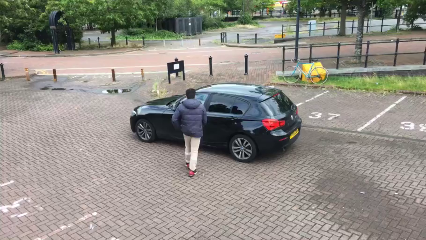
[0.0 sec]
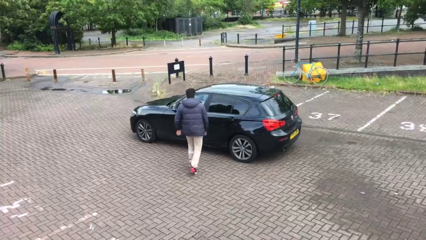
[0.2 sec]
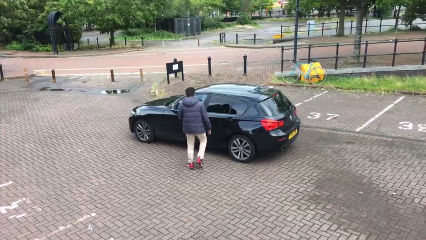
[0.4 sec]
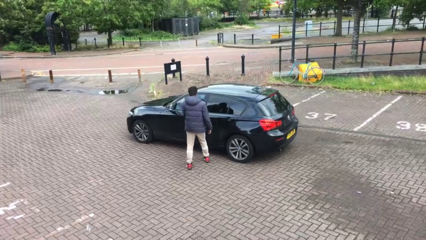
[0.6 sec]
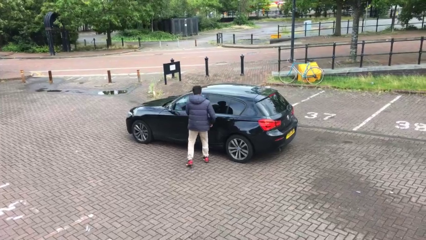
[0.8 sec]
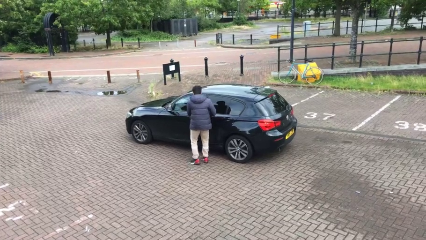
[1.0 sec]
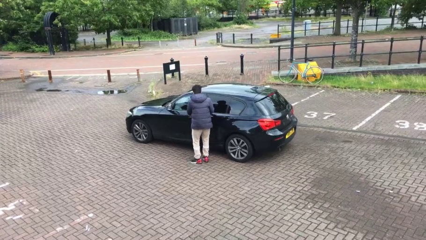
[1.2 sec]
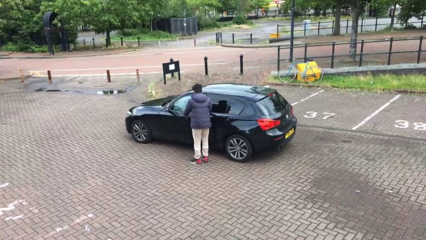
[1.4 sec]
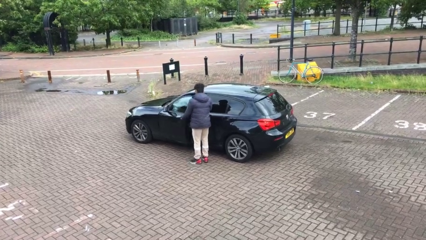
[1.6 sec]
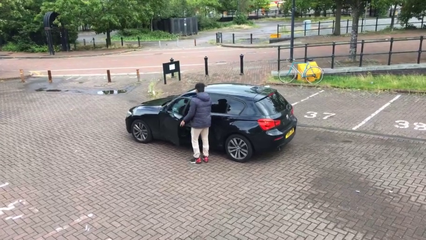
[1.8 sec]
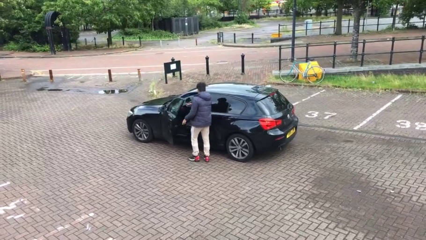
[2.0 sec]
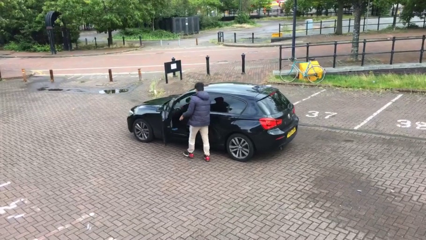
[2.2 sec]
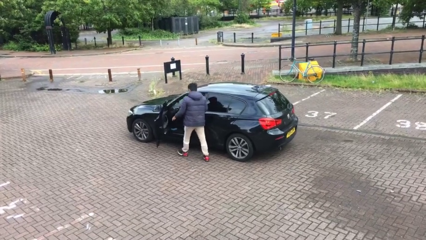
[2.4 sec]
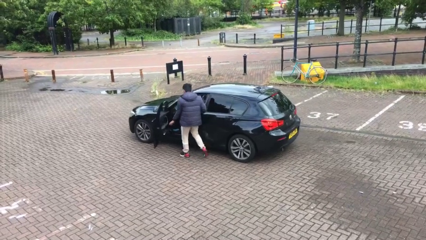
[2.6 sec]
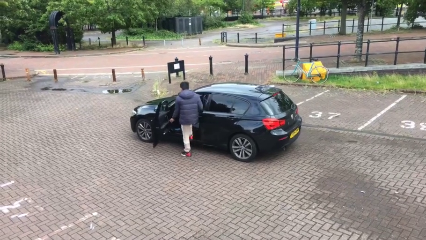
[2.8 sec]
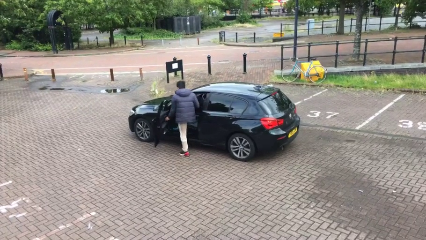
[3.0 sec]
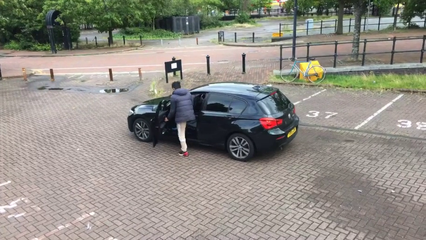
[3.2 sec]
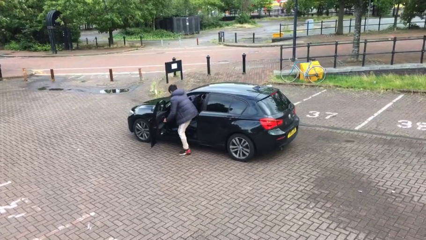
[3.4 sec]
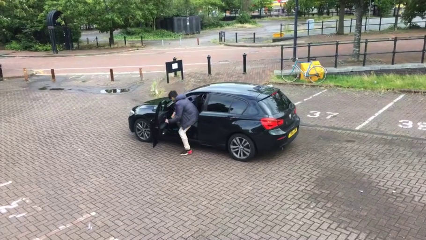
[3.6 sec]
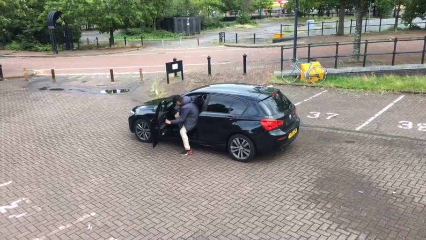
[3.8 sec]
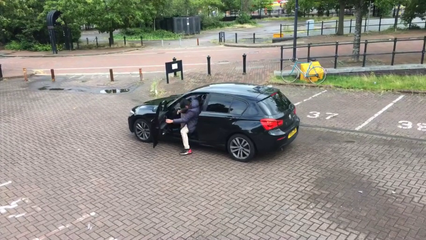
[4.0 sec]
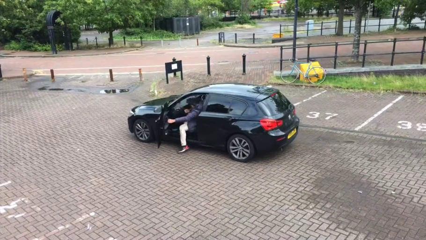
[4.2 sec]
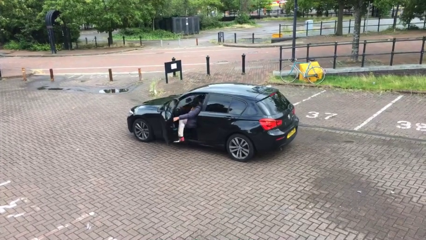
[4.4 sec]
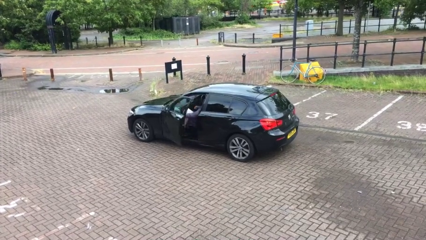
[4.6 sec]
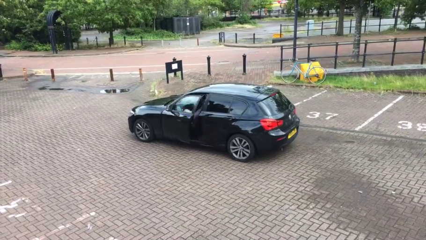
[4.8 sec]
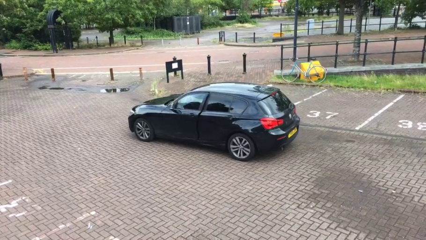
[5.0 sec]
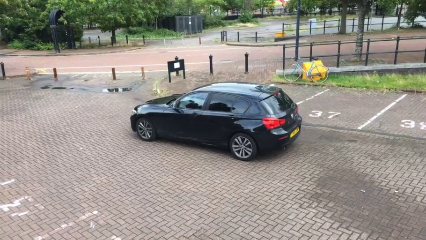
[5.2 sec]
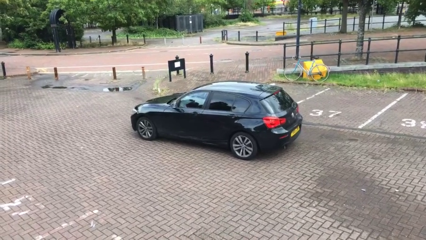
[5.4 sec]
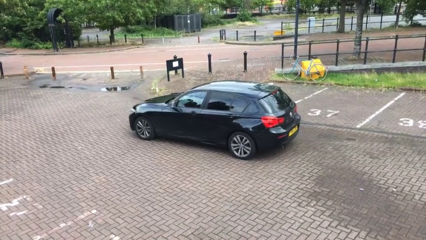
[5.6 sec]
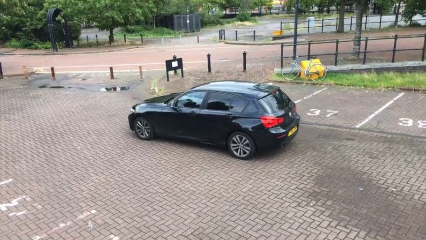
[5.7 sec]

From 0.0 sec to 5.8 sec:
car picks up person

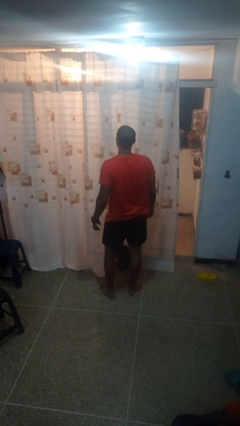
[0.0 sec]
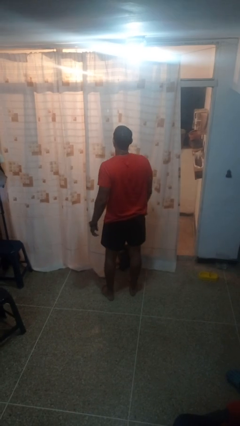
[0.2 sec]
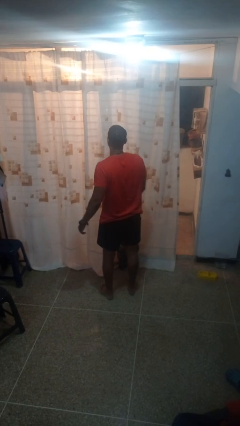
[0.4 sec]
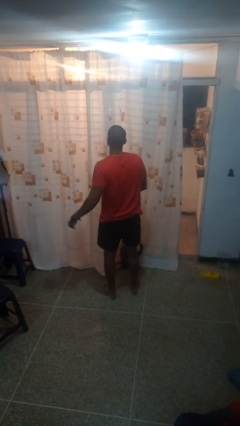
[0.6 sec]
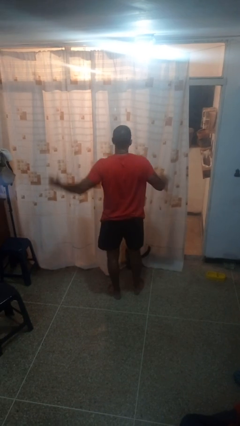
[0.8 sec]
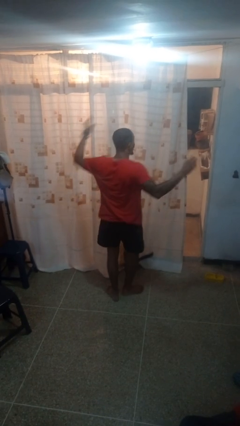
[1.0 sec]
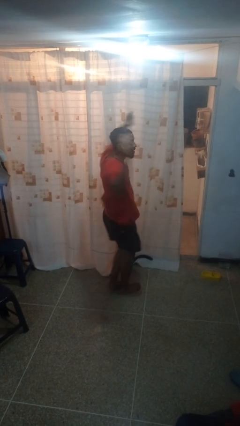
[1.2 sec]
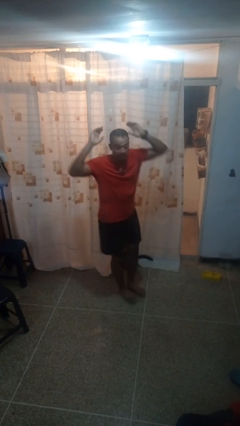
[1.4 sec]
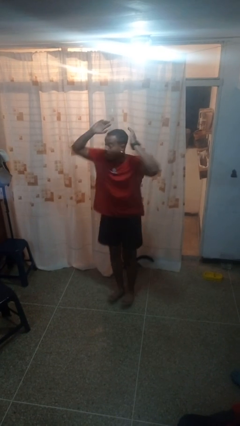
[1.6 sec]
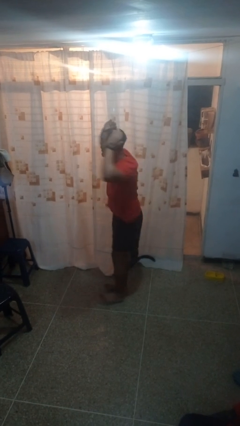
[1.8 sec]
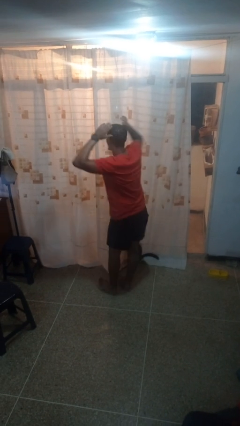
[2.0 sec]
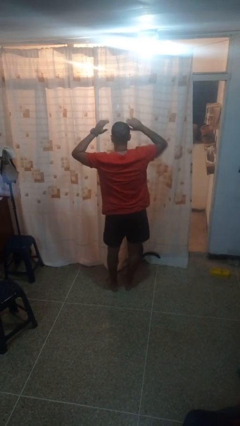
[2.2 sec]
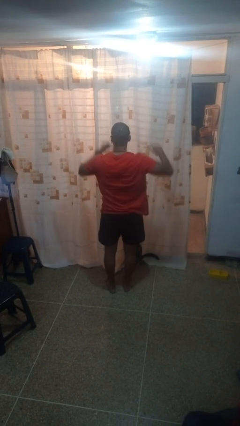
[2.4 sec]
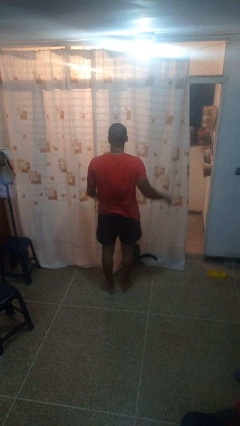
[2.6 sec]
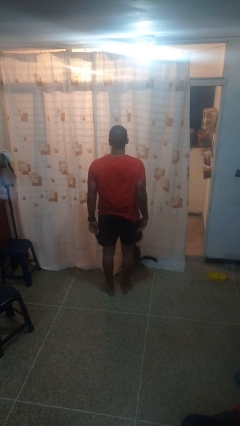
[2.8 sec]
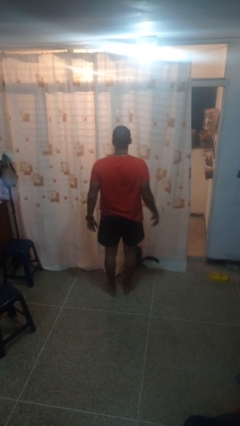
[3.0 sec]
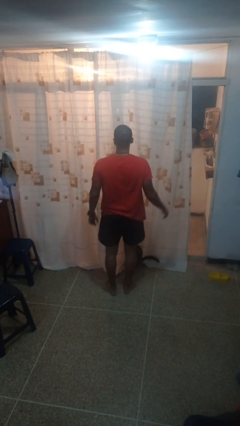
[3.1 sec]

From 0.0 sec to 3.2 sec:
person twirls

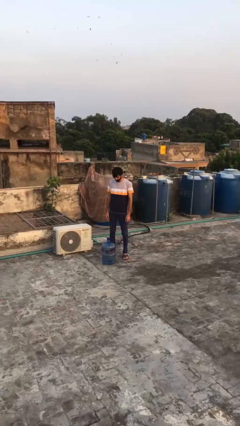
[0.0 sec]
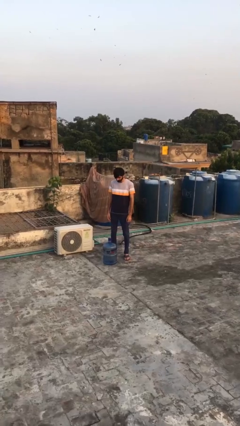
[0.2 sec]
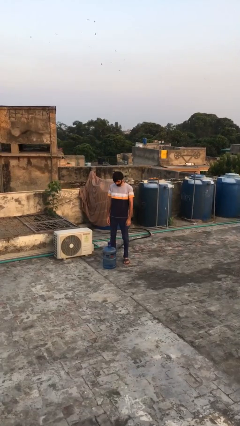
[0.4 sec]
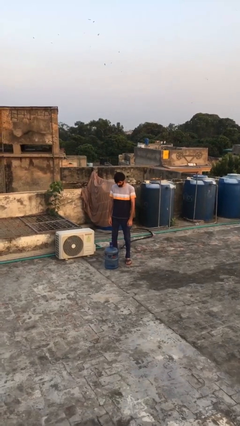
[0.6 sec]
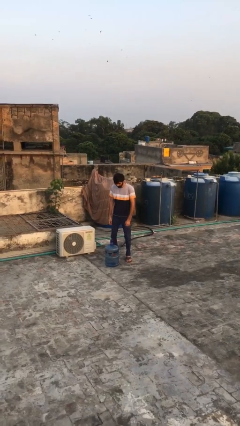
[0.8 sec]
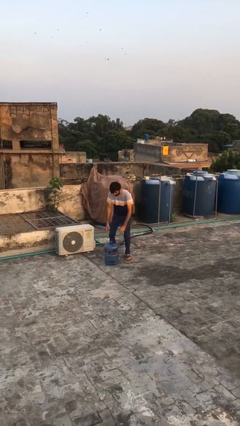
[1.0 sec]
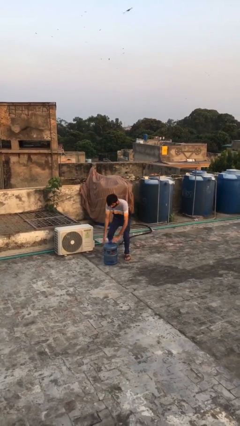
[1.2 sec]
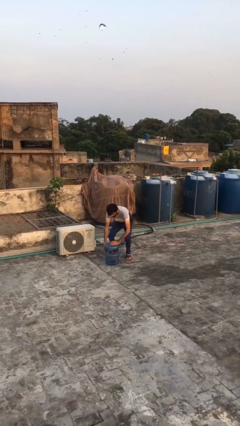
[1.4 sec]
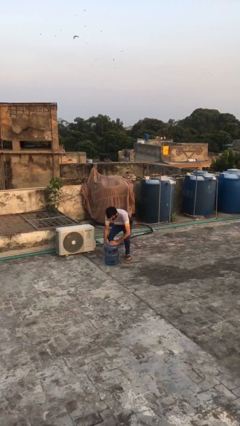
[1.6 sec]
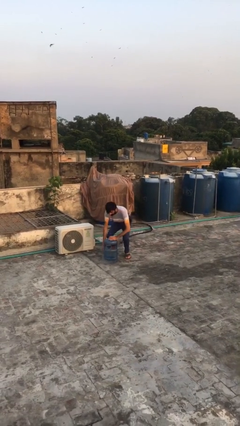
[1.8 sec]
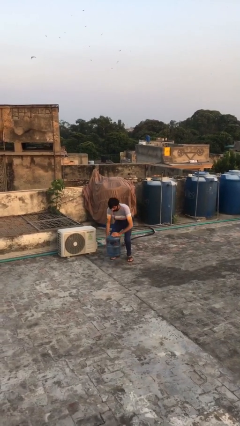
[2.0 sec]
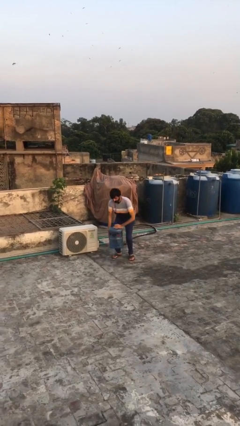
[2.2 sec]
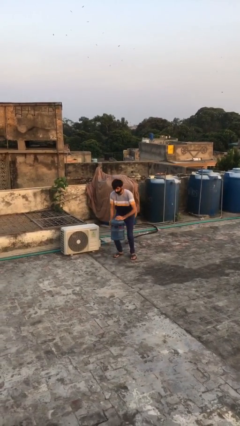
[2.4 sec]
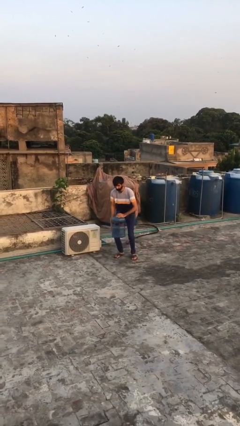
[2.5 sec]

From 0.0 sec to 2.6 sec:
person picks up object from floor

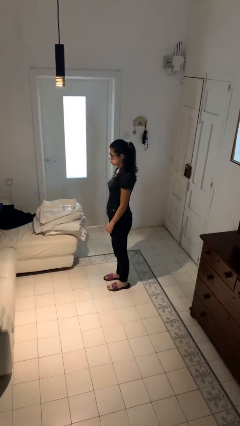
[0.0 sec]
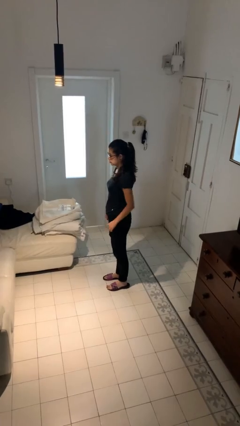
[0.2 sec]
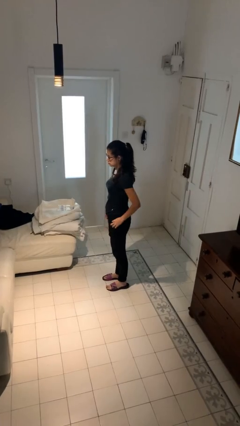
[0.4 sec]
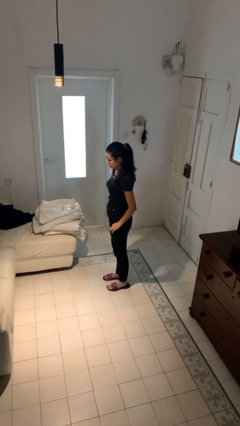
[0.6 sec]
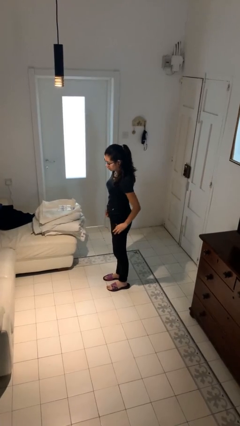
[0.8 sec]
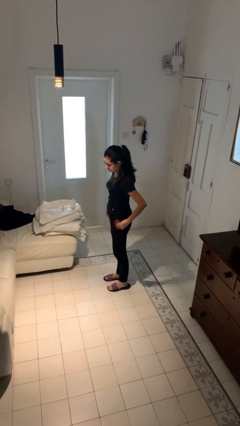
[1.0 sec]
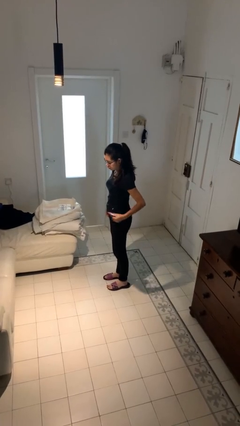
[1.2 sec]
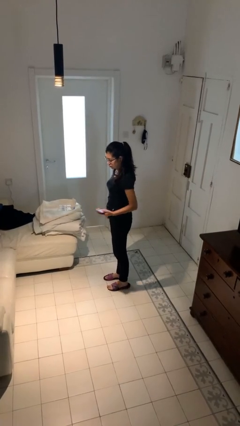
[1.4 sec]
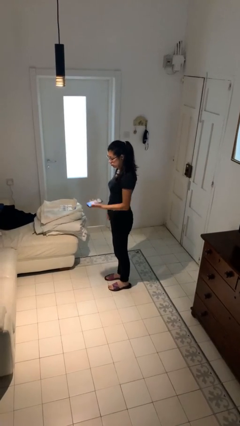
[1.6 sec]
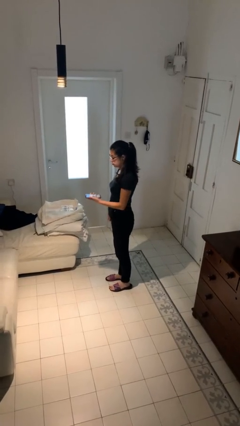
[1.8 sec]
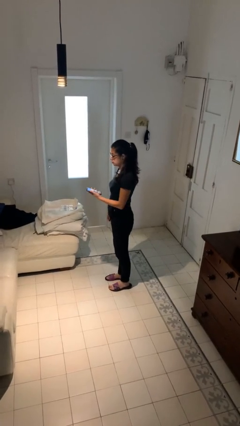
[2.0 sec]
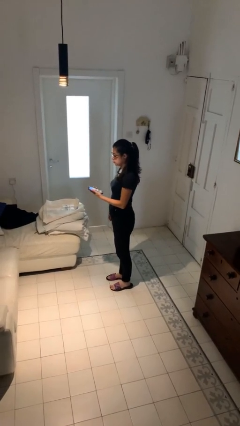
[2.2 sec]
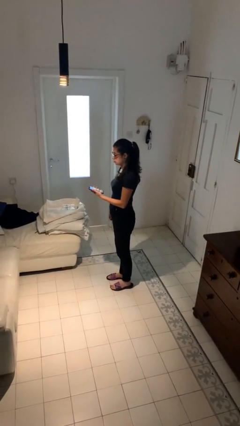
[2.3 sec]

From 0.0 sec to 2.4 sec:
person takes phone from pocket

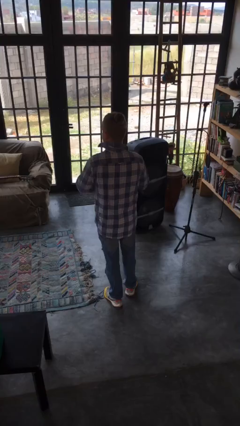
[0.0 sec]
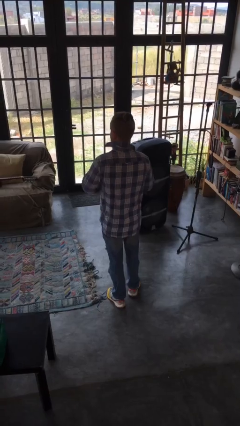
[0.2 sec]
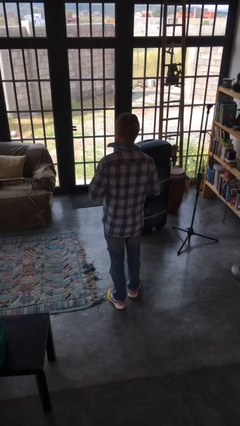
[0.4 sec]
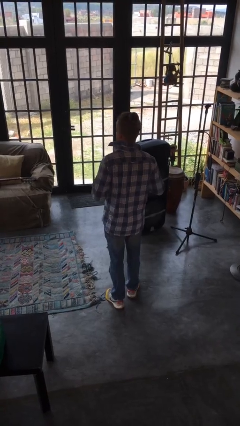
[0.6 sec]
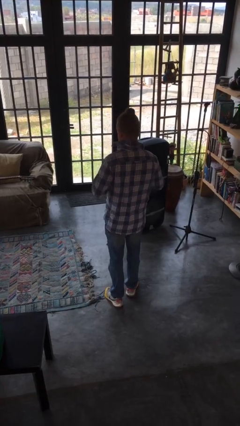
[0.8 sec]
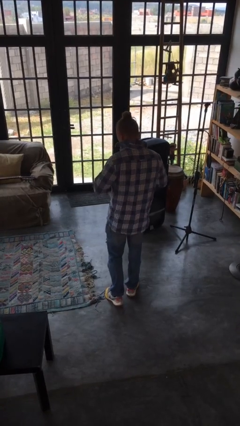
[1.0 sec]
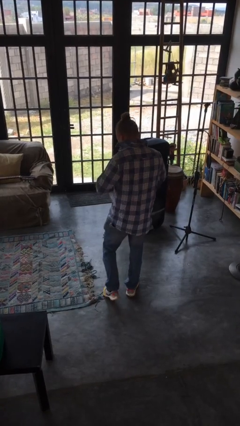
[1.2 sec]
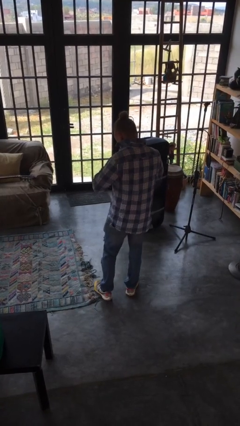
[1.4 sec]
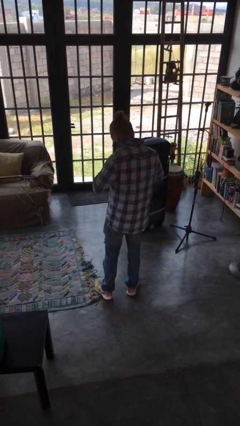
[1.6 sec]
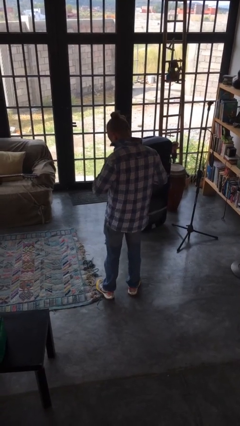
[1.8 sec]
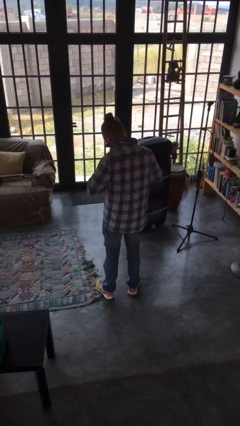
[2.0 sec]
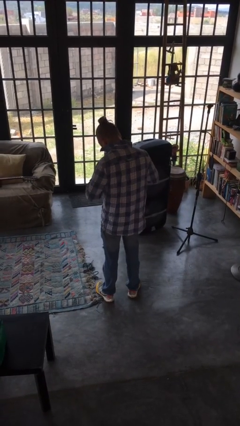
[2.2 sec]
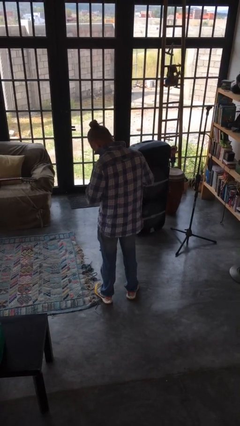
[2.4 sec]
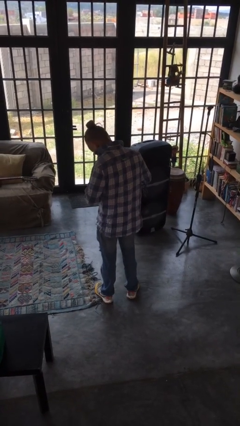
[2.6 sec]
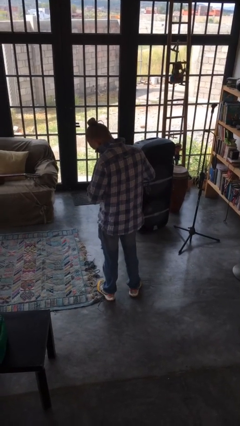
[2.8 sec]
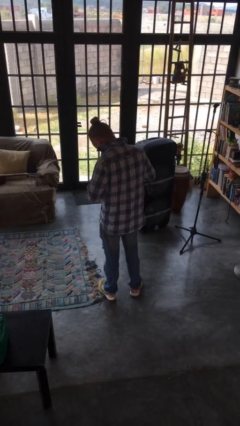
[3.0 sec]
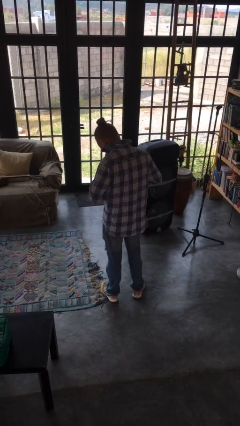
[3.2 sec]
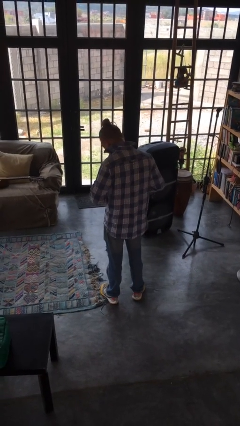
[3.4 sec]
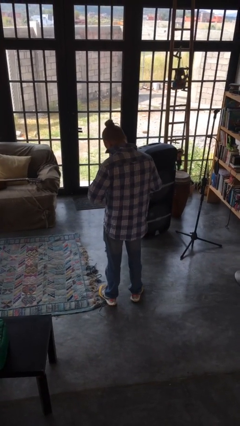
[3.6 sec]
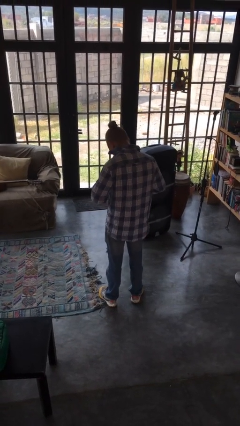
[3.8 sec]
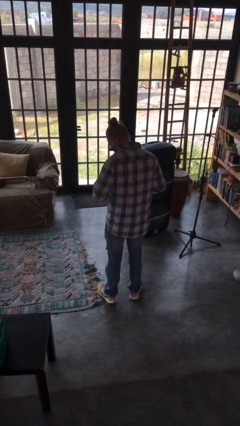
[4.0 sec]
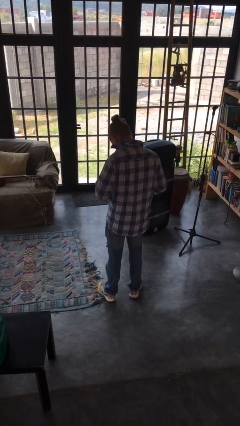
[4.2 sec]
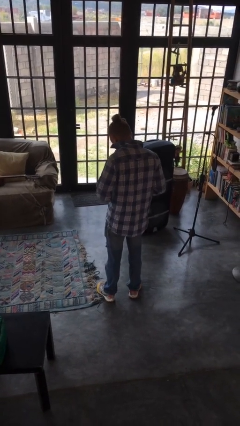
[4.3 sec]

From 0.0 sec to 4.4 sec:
person unbuttons shirt
